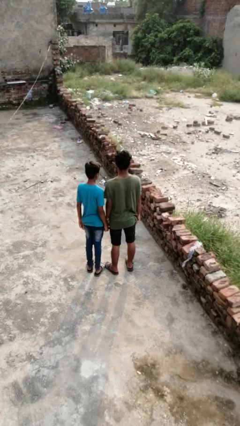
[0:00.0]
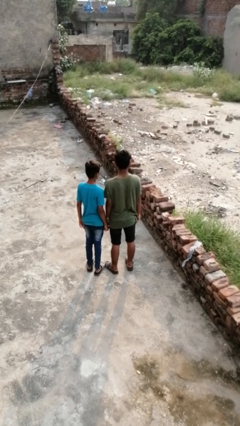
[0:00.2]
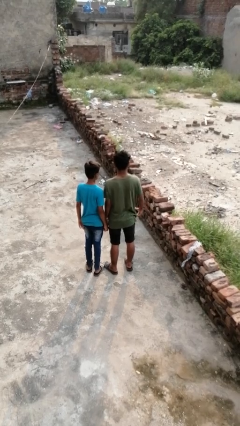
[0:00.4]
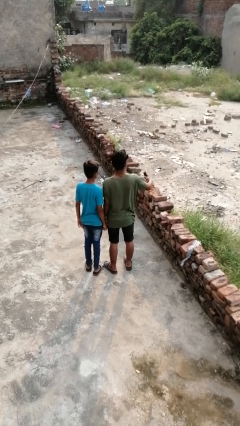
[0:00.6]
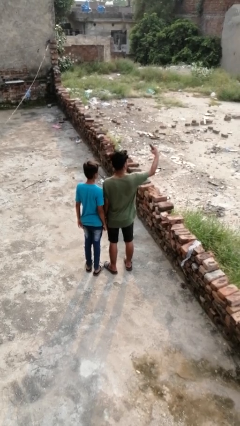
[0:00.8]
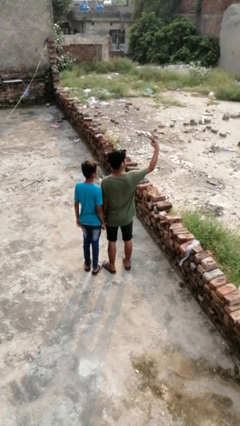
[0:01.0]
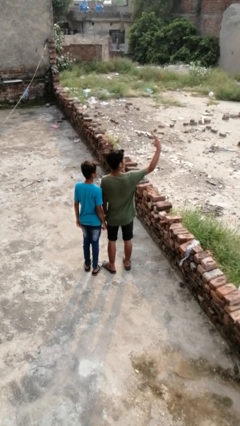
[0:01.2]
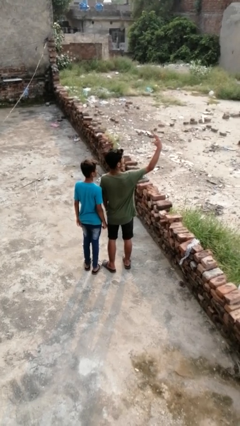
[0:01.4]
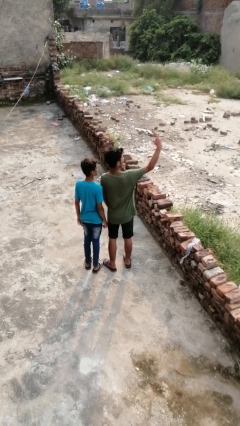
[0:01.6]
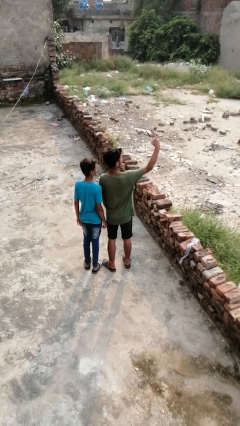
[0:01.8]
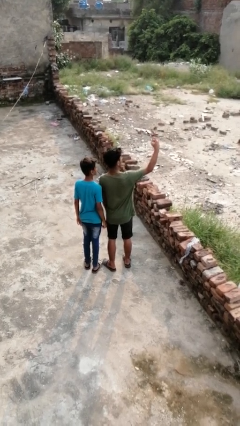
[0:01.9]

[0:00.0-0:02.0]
person takes selfie with person

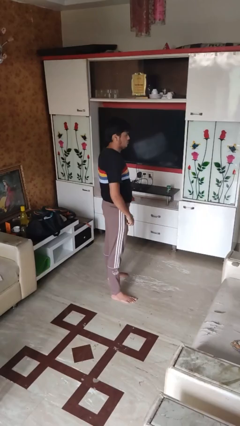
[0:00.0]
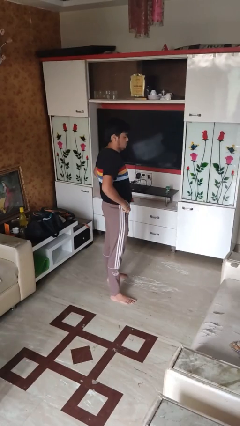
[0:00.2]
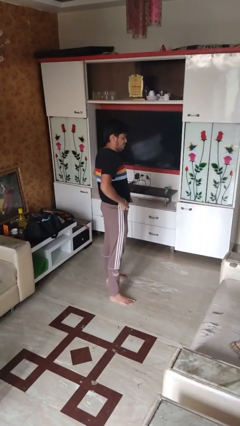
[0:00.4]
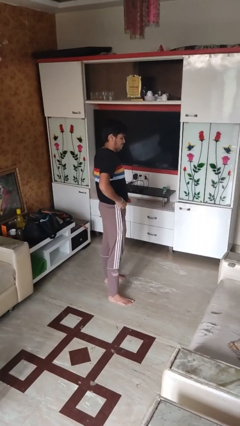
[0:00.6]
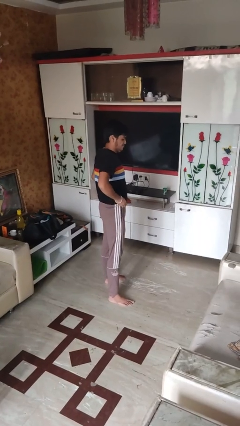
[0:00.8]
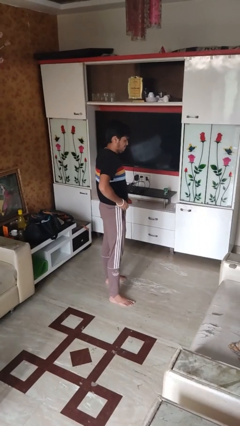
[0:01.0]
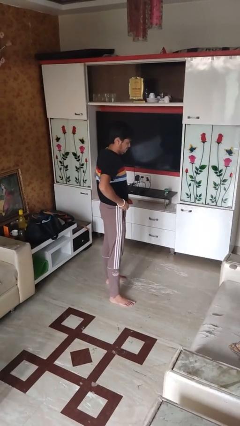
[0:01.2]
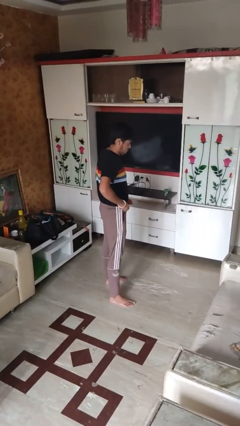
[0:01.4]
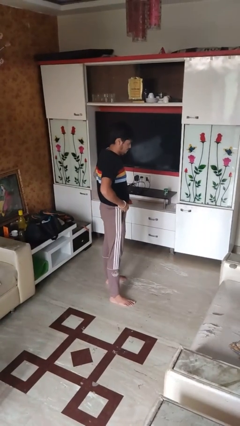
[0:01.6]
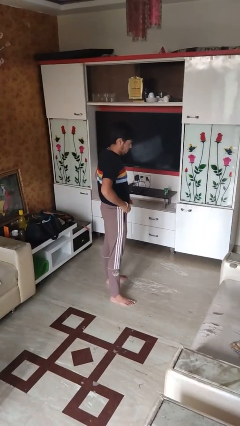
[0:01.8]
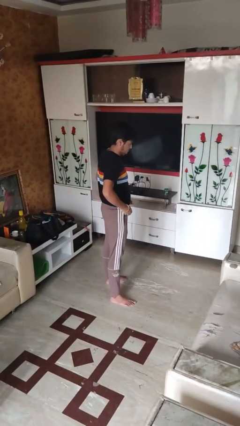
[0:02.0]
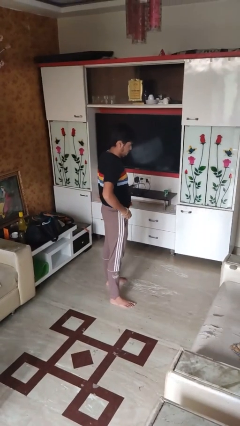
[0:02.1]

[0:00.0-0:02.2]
person hikes up pants

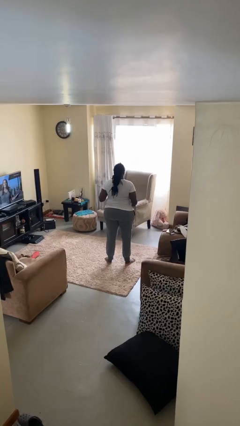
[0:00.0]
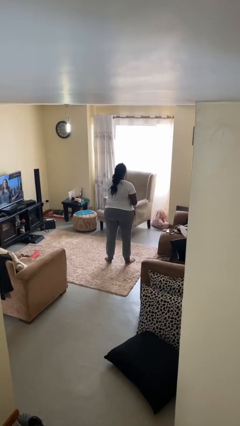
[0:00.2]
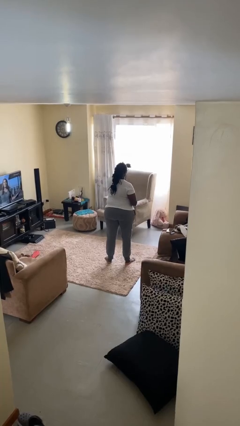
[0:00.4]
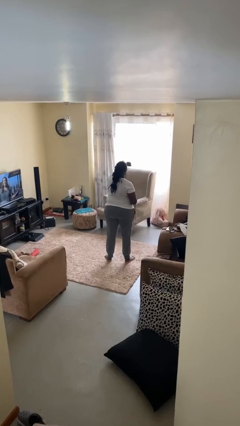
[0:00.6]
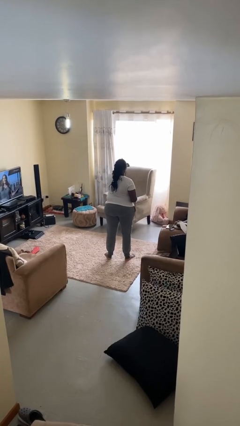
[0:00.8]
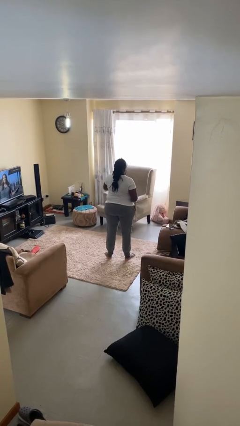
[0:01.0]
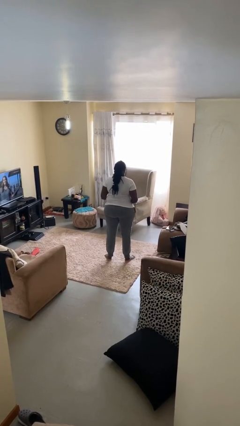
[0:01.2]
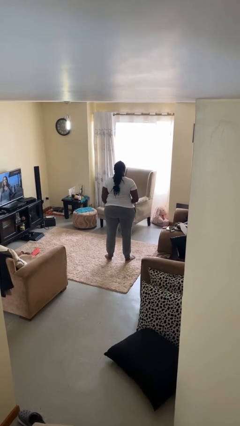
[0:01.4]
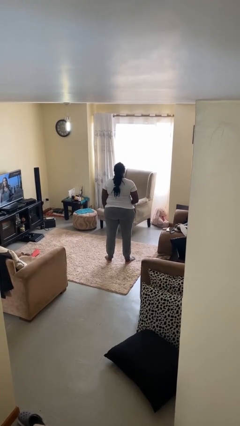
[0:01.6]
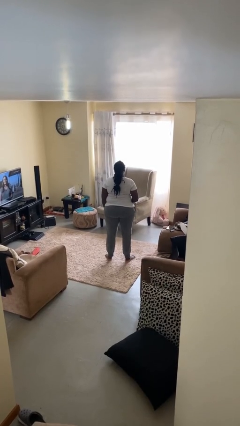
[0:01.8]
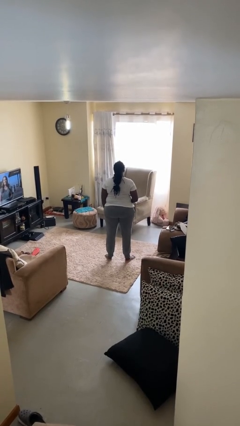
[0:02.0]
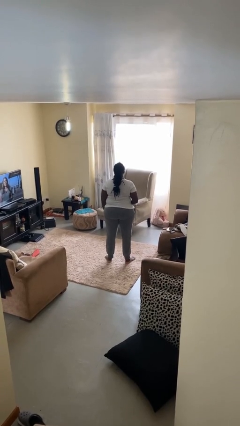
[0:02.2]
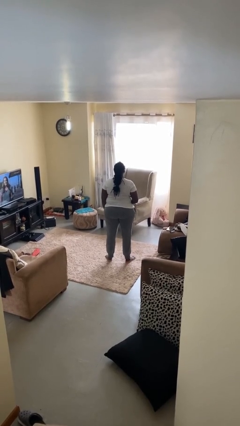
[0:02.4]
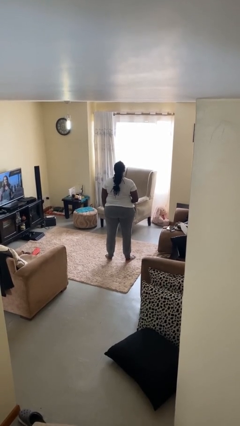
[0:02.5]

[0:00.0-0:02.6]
person punches

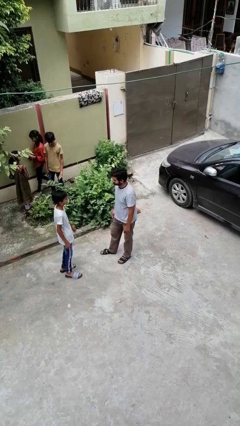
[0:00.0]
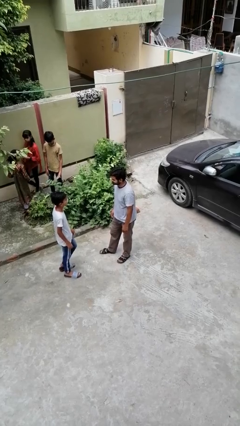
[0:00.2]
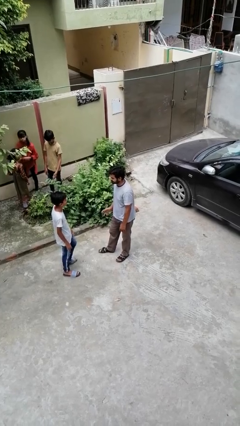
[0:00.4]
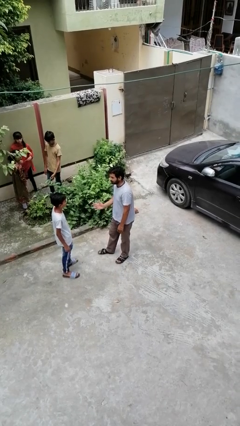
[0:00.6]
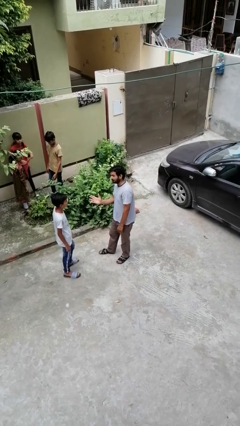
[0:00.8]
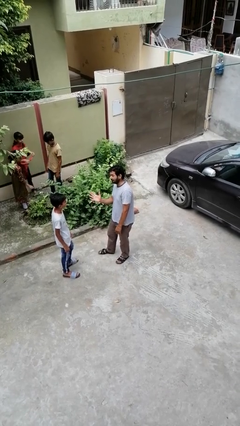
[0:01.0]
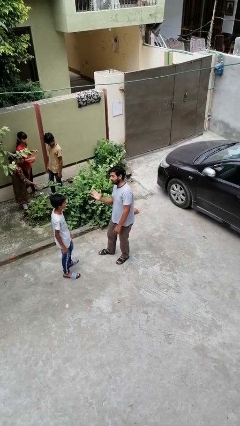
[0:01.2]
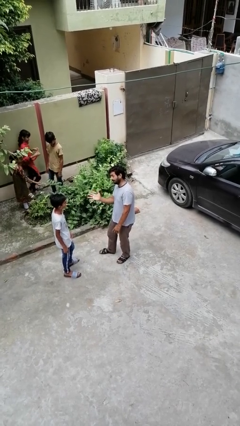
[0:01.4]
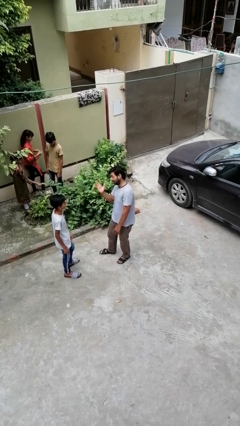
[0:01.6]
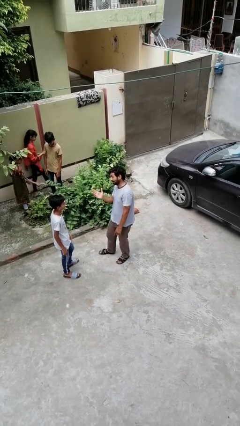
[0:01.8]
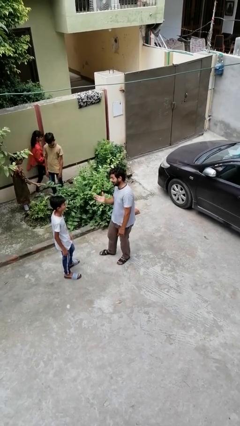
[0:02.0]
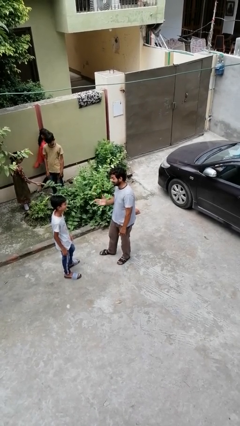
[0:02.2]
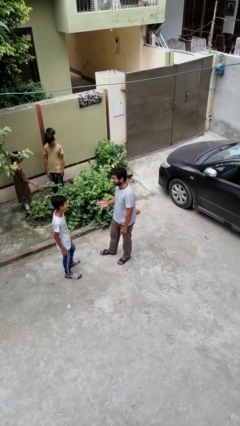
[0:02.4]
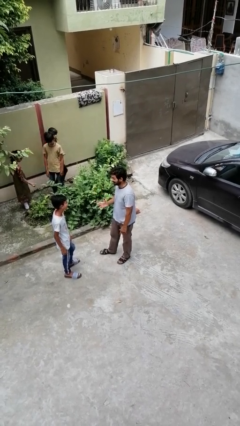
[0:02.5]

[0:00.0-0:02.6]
person talks to person

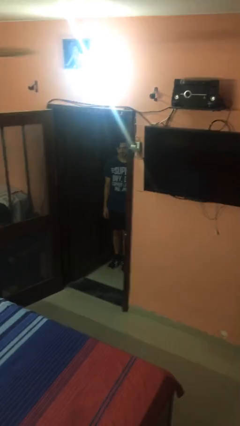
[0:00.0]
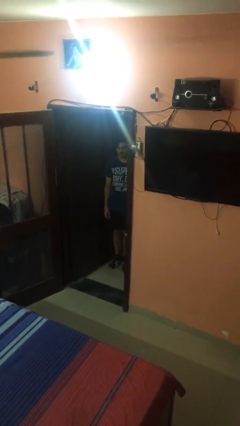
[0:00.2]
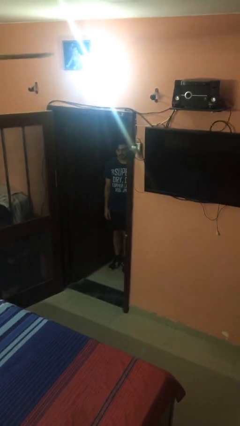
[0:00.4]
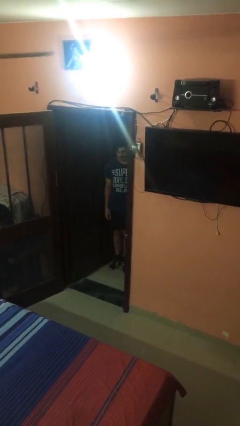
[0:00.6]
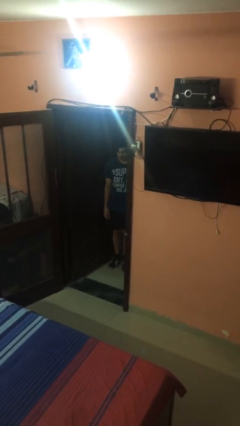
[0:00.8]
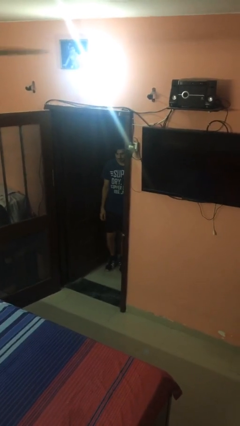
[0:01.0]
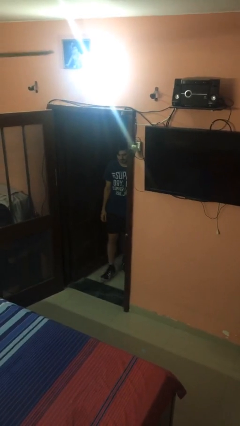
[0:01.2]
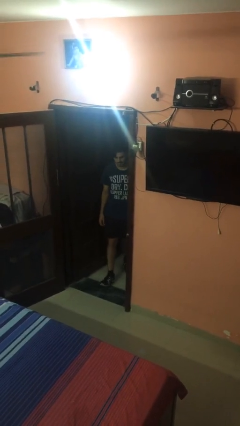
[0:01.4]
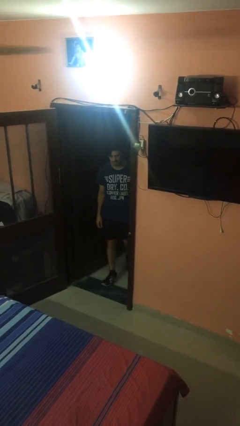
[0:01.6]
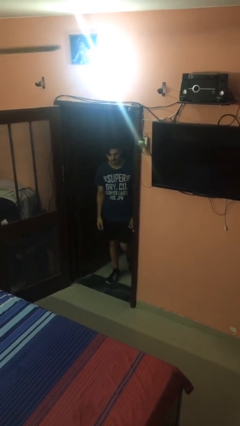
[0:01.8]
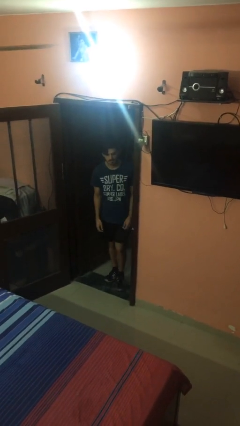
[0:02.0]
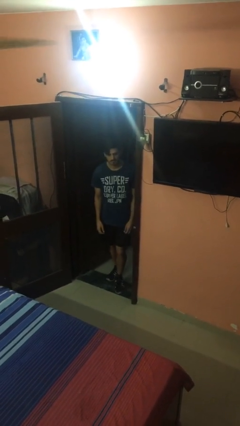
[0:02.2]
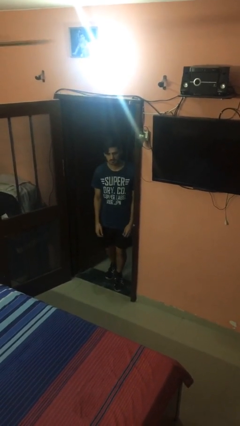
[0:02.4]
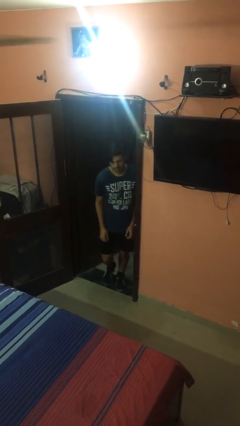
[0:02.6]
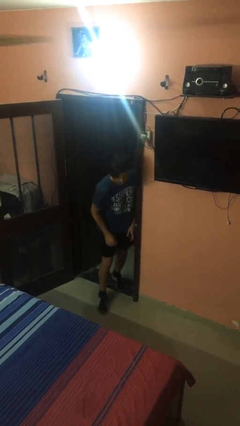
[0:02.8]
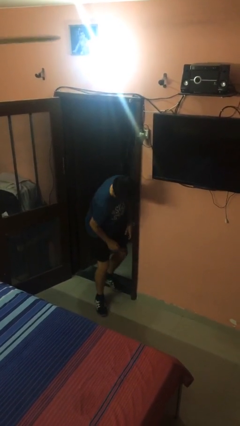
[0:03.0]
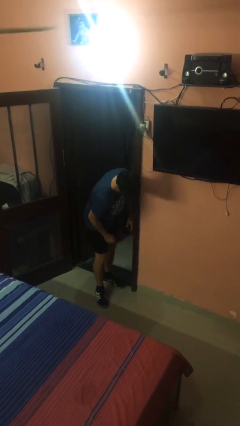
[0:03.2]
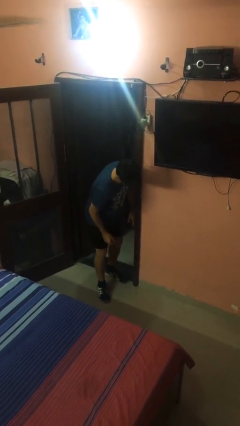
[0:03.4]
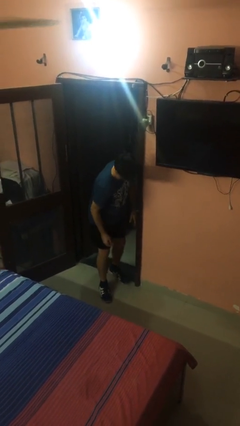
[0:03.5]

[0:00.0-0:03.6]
person bumps into wall

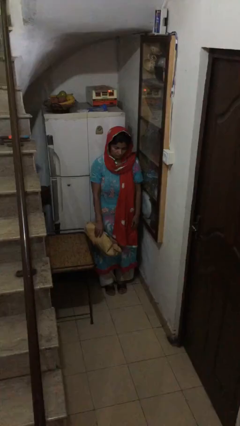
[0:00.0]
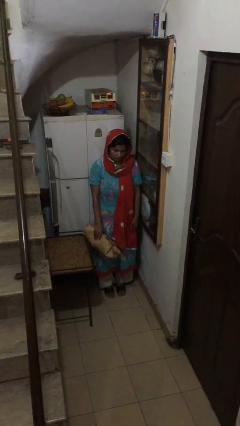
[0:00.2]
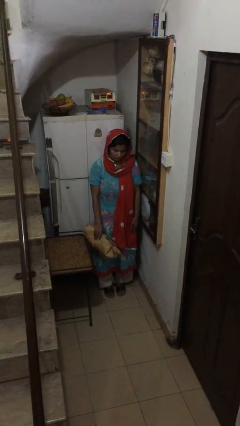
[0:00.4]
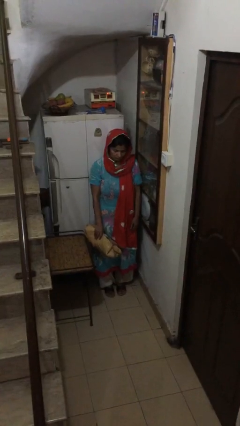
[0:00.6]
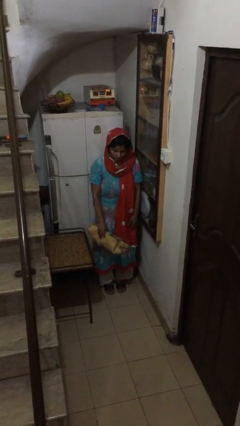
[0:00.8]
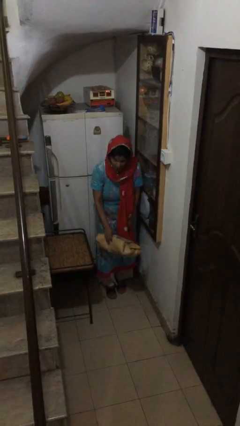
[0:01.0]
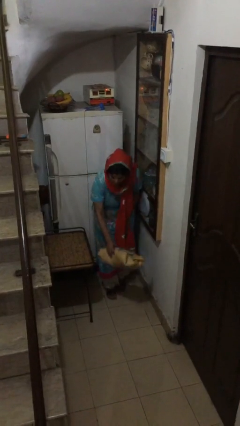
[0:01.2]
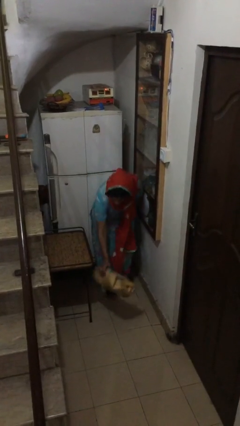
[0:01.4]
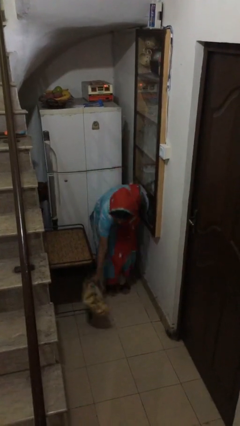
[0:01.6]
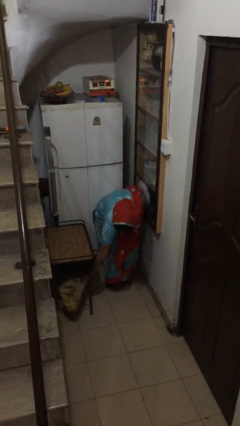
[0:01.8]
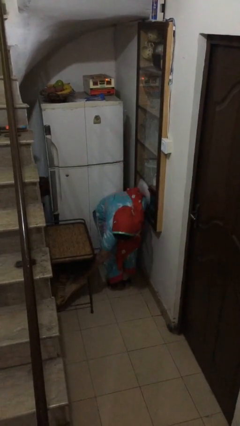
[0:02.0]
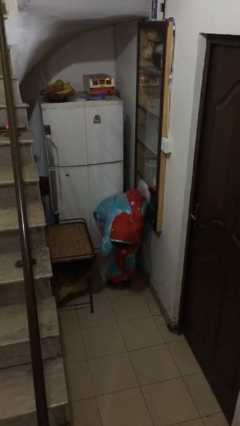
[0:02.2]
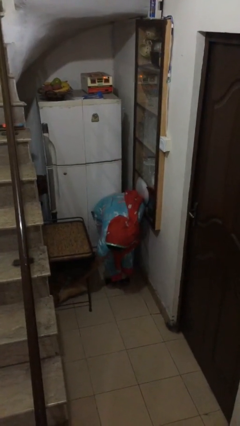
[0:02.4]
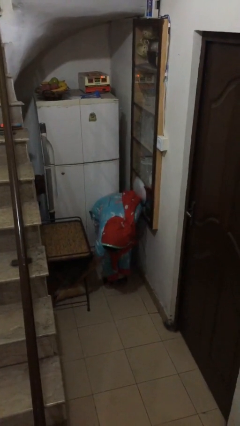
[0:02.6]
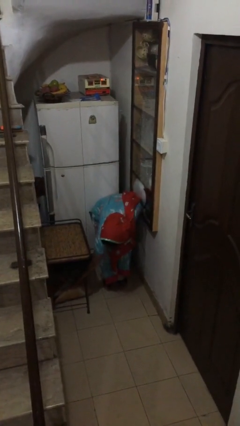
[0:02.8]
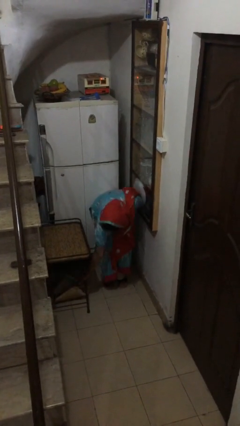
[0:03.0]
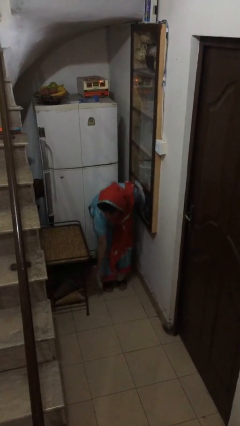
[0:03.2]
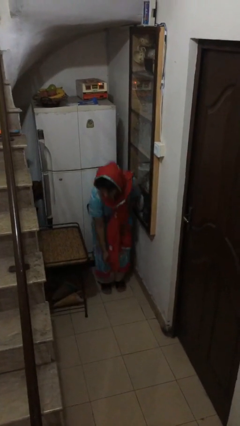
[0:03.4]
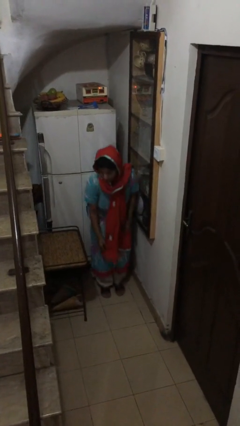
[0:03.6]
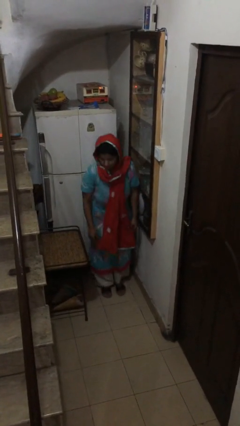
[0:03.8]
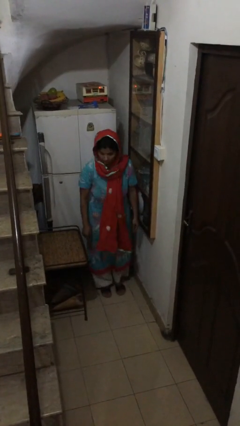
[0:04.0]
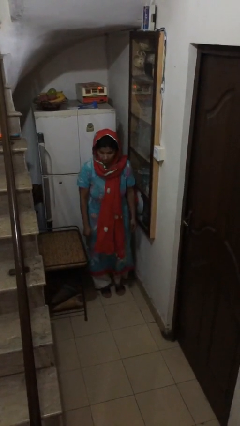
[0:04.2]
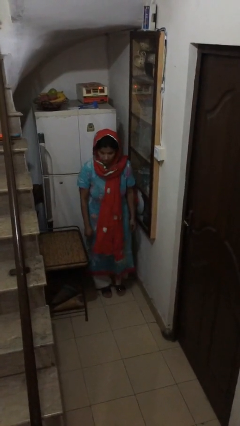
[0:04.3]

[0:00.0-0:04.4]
person puts down object on table
